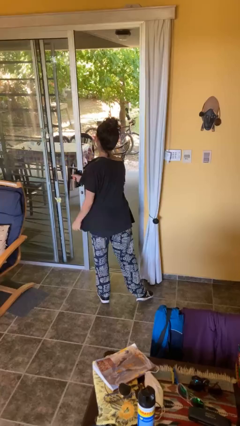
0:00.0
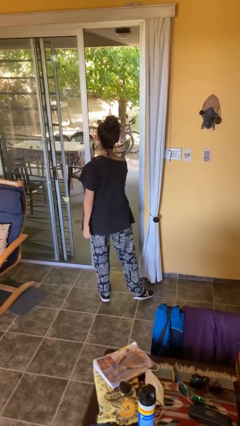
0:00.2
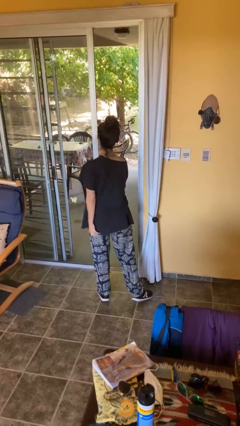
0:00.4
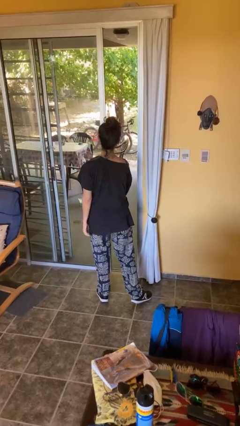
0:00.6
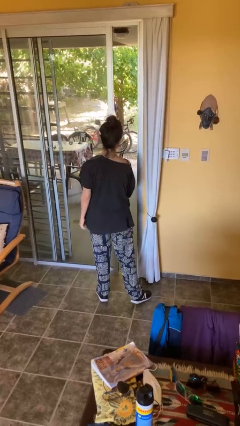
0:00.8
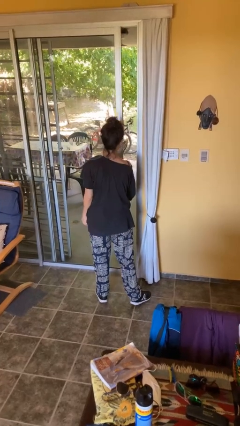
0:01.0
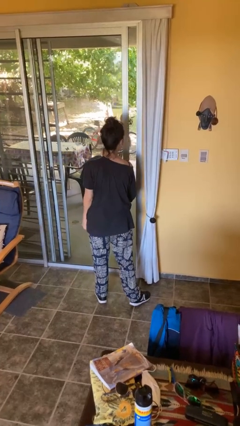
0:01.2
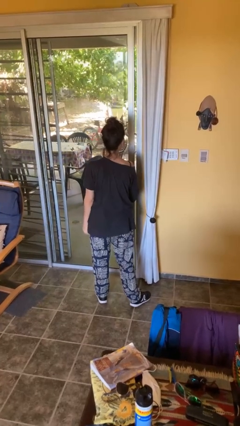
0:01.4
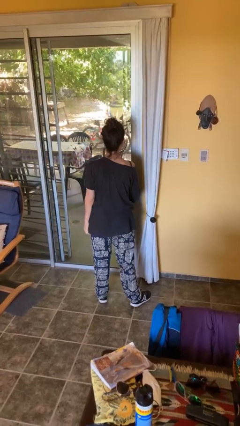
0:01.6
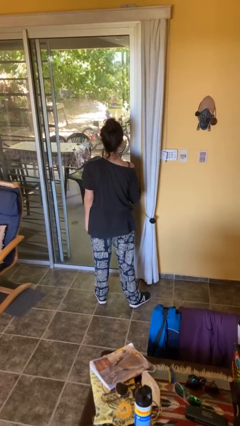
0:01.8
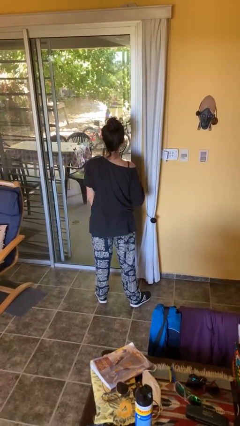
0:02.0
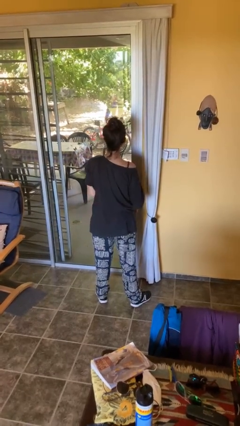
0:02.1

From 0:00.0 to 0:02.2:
person closes facility door

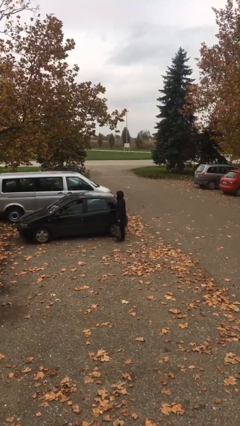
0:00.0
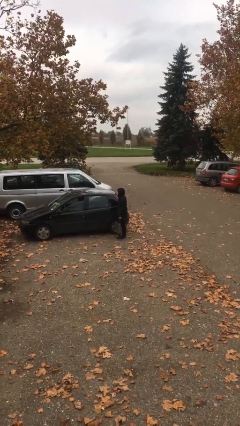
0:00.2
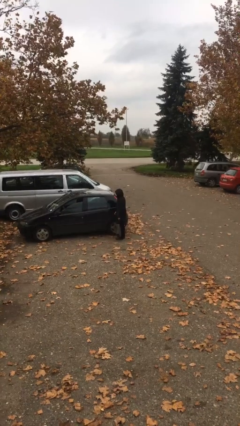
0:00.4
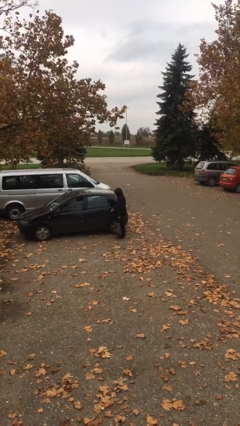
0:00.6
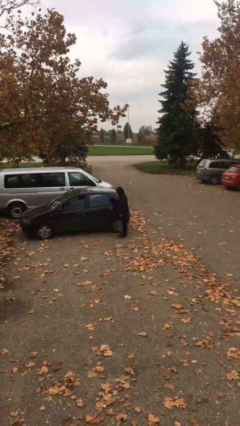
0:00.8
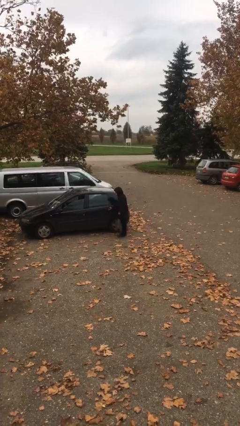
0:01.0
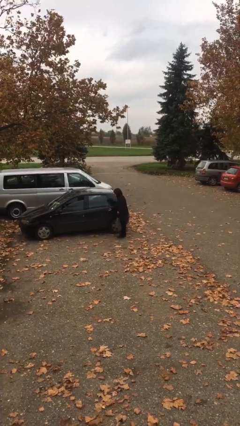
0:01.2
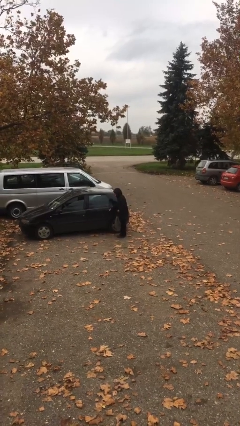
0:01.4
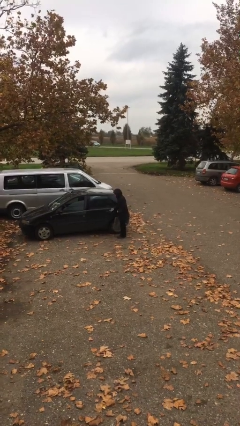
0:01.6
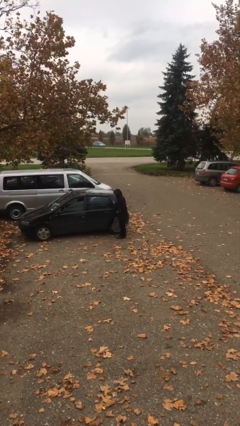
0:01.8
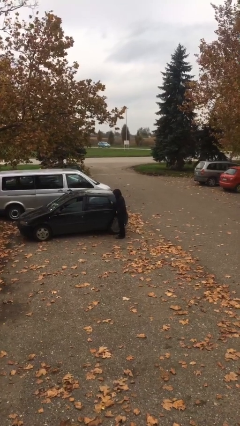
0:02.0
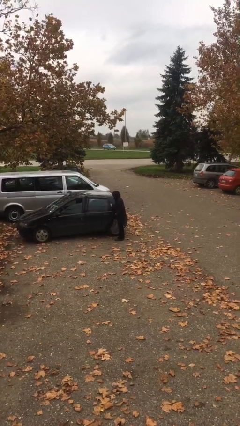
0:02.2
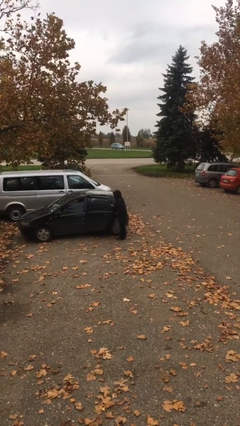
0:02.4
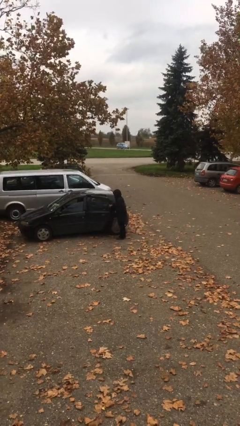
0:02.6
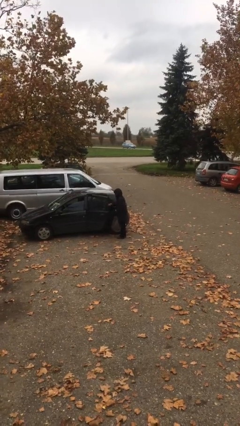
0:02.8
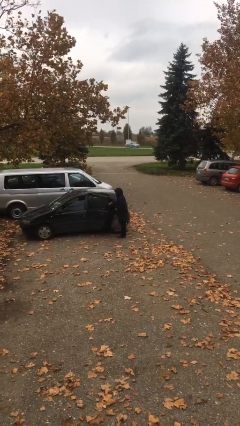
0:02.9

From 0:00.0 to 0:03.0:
person opens car door

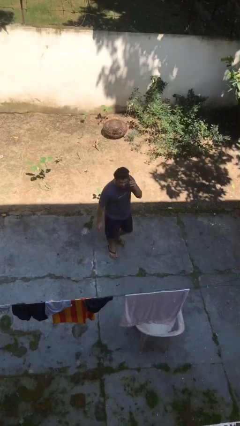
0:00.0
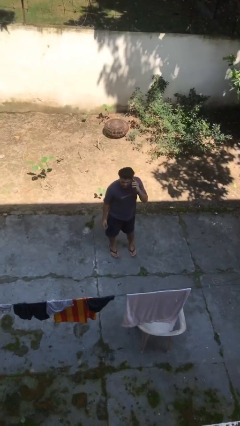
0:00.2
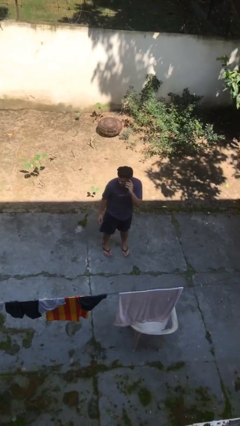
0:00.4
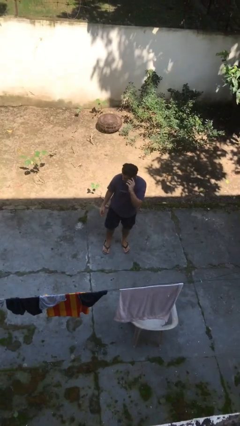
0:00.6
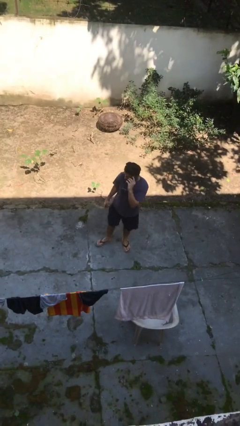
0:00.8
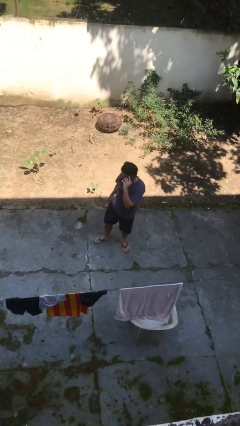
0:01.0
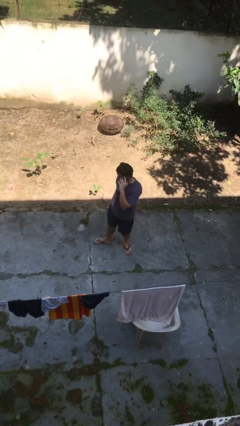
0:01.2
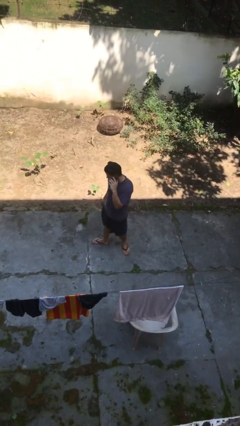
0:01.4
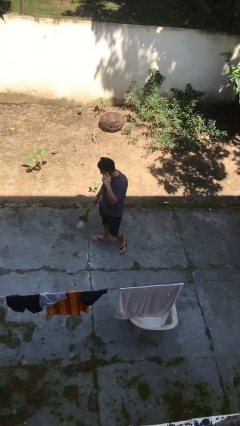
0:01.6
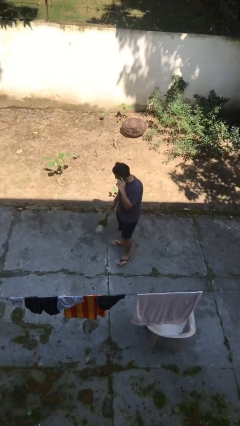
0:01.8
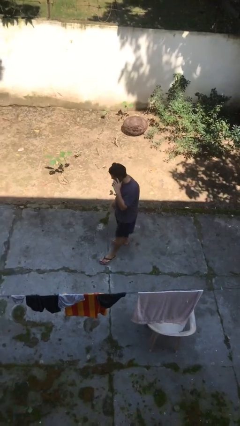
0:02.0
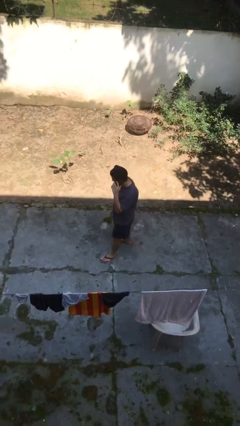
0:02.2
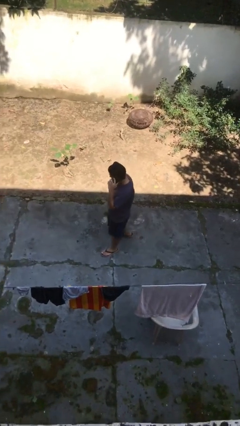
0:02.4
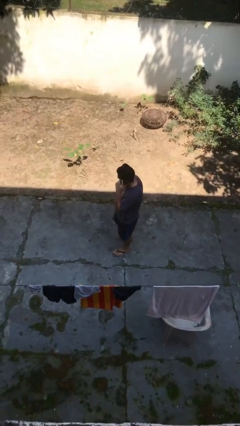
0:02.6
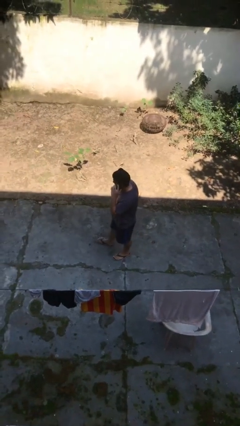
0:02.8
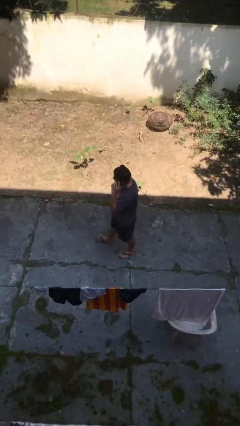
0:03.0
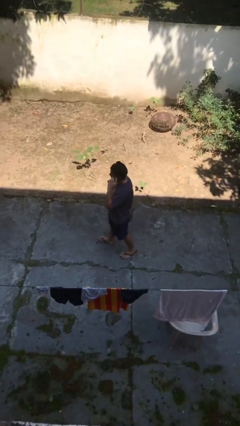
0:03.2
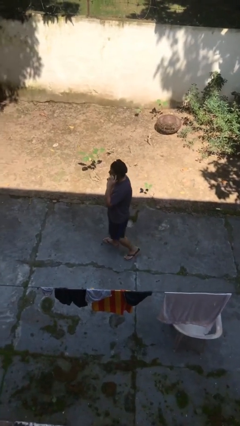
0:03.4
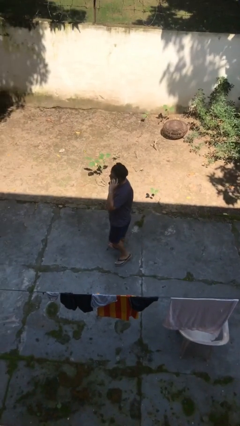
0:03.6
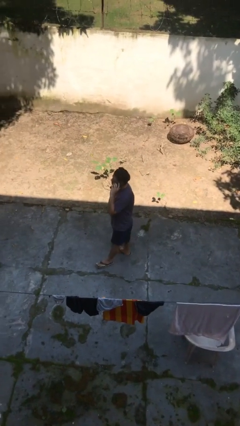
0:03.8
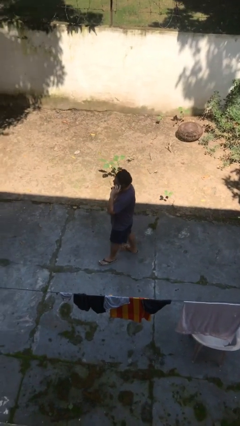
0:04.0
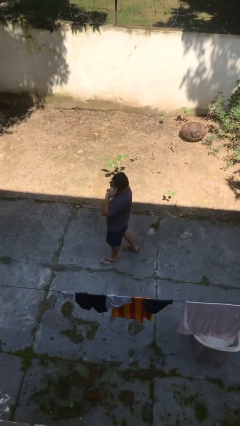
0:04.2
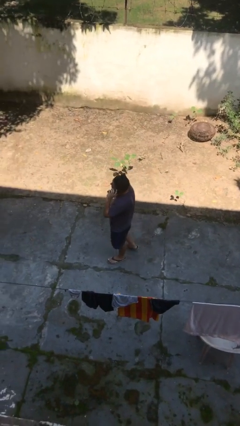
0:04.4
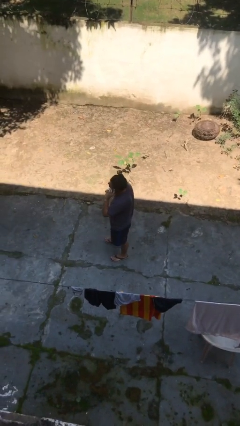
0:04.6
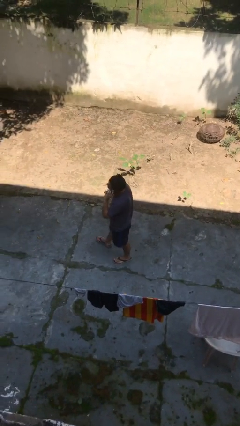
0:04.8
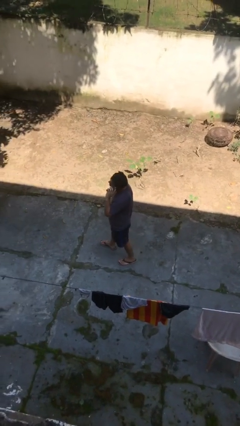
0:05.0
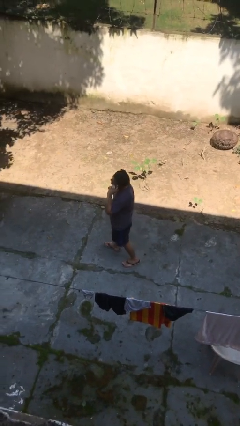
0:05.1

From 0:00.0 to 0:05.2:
person talks on phone

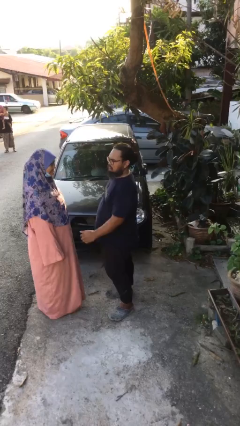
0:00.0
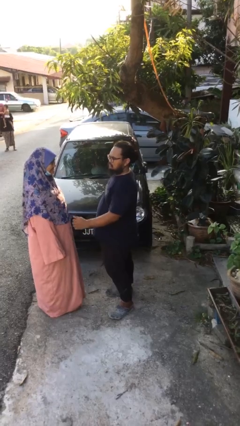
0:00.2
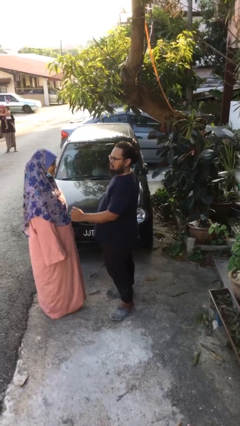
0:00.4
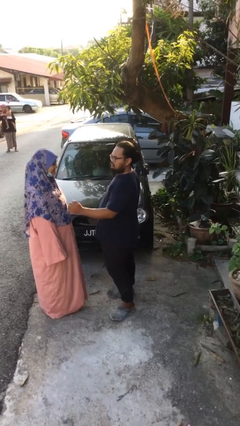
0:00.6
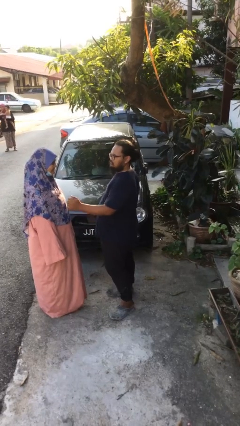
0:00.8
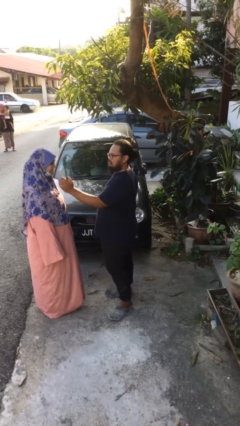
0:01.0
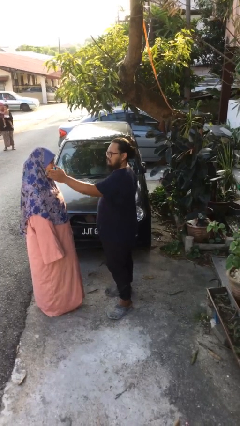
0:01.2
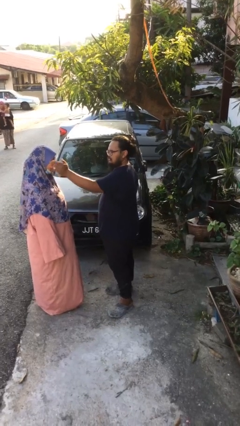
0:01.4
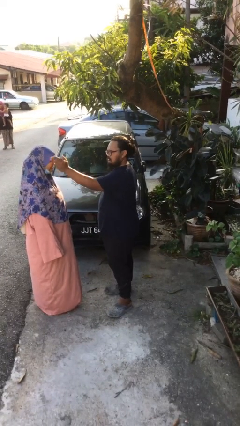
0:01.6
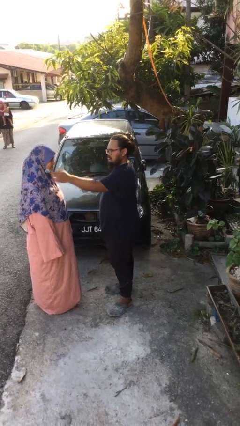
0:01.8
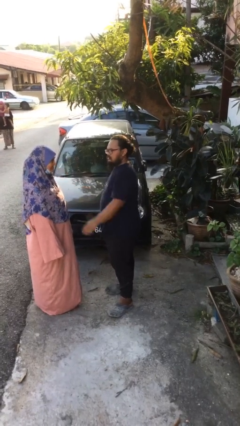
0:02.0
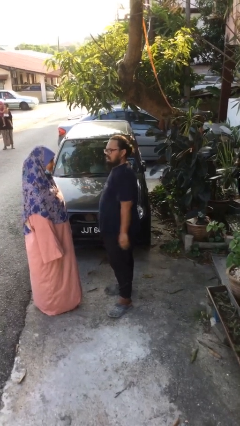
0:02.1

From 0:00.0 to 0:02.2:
person touches face of person

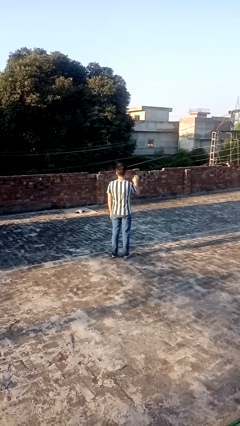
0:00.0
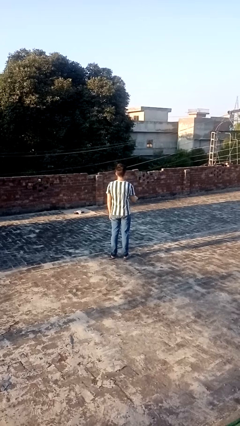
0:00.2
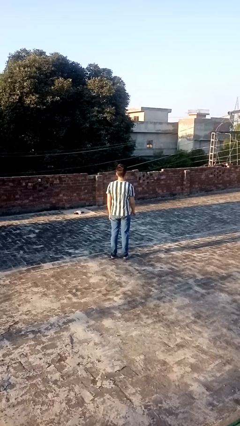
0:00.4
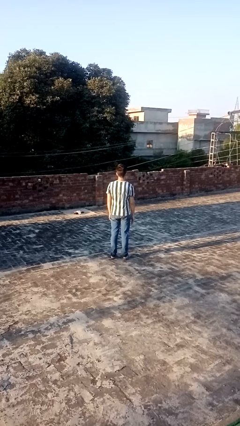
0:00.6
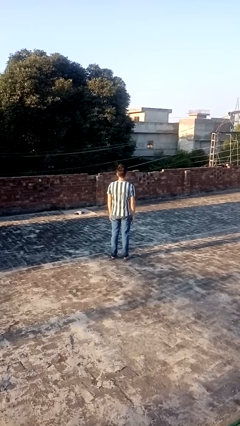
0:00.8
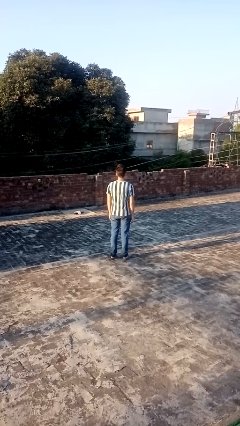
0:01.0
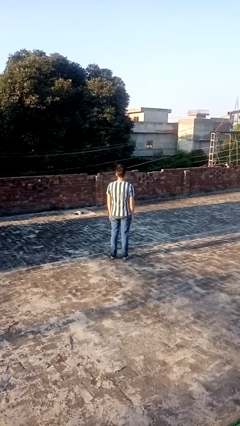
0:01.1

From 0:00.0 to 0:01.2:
person gestures lower hand

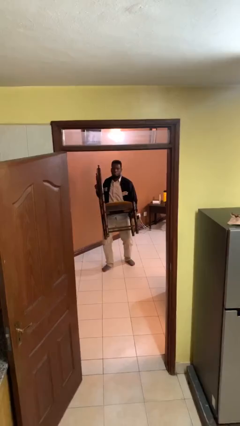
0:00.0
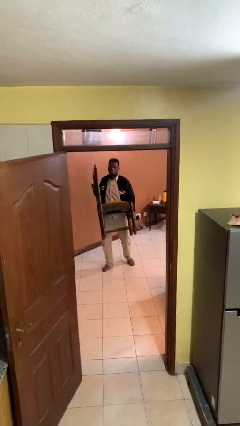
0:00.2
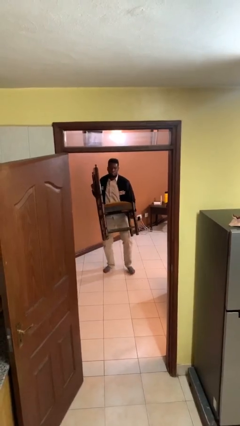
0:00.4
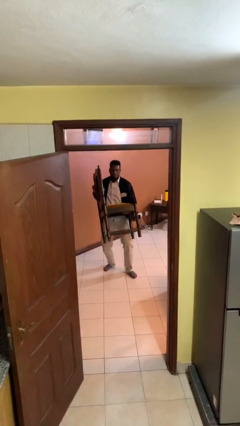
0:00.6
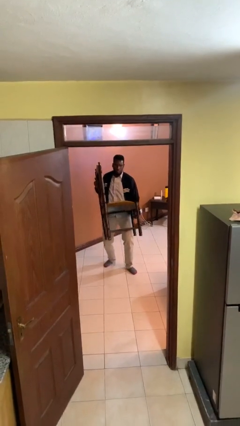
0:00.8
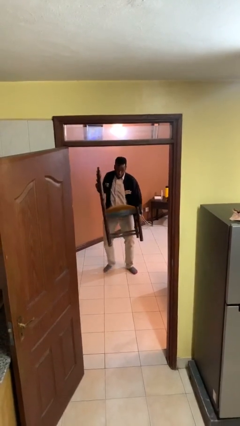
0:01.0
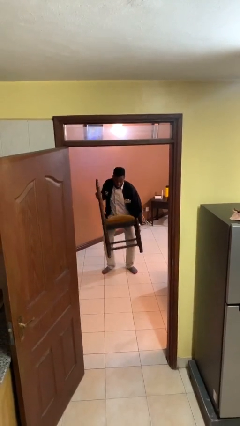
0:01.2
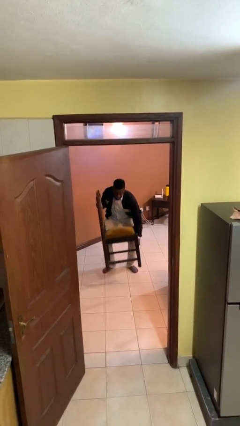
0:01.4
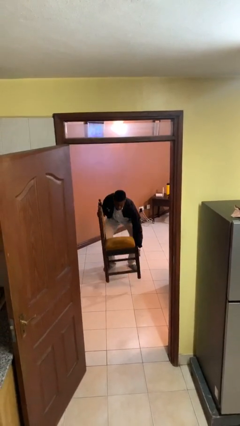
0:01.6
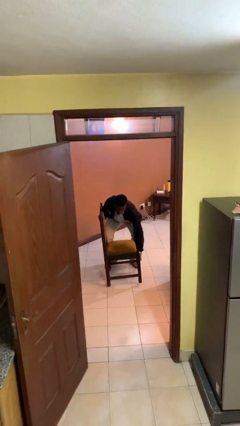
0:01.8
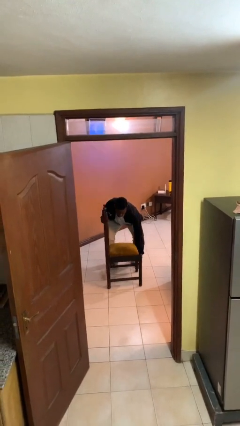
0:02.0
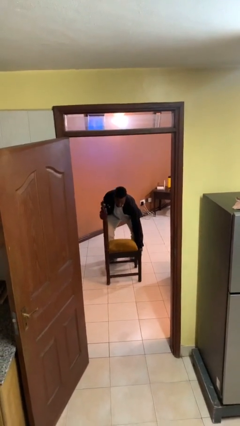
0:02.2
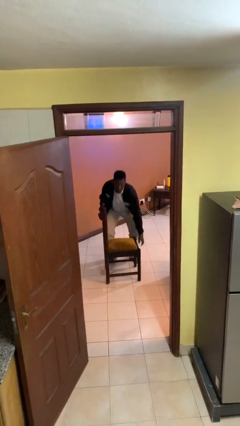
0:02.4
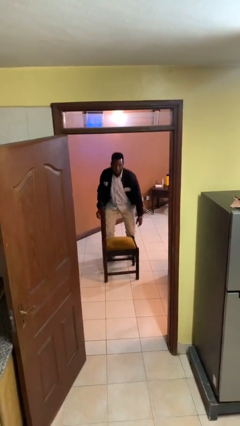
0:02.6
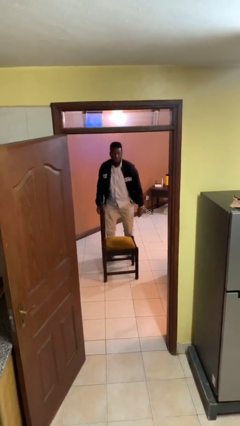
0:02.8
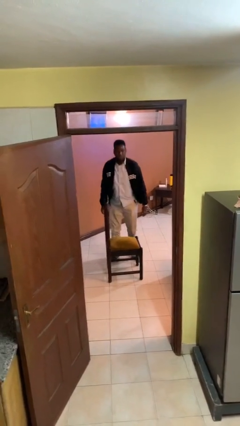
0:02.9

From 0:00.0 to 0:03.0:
person puts down object on floor

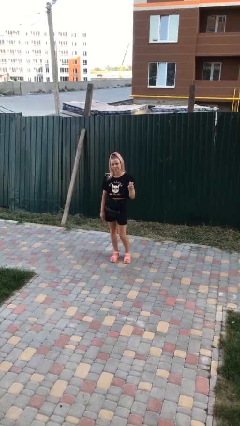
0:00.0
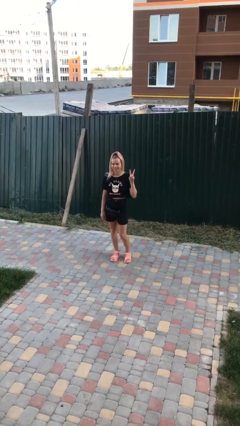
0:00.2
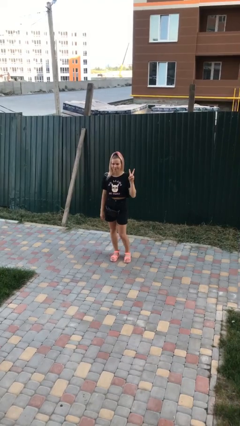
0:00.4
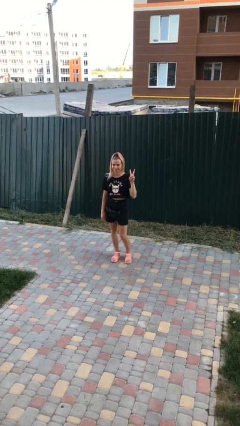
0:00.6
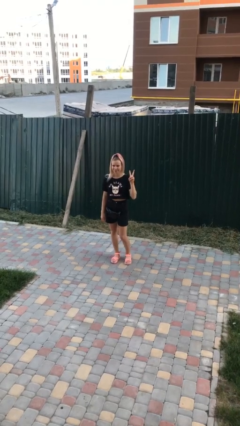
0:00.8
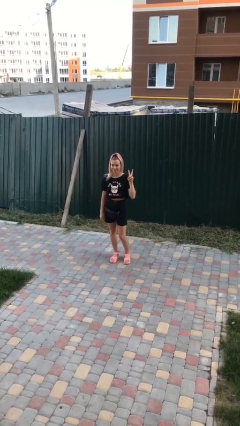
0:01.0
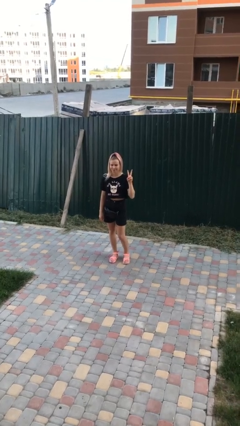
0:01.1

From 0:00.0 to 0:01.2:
person gestures peace
